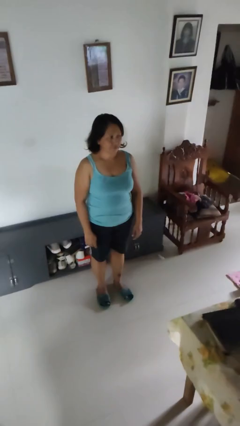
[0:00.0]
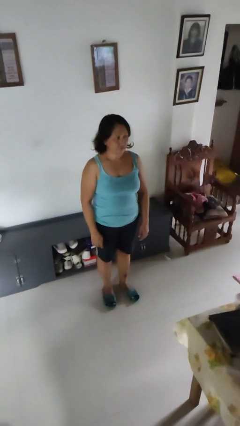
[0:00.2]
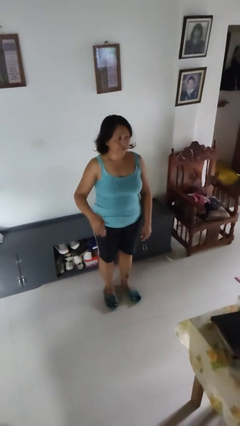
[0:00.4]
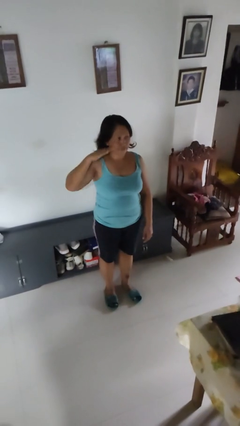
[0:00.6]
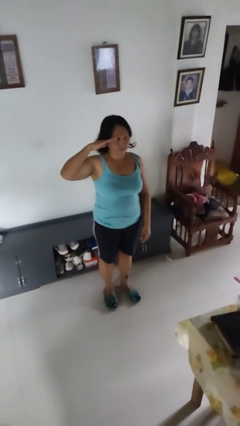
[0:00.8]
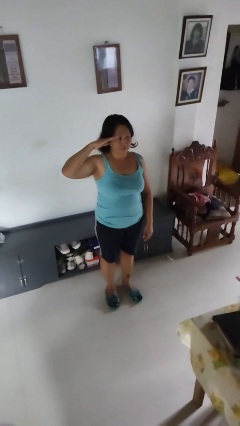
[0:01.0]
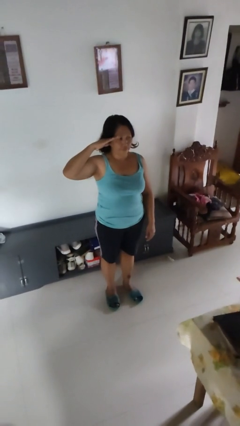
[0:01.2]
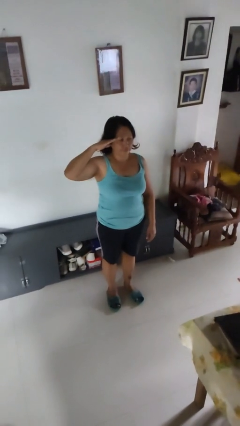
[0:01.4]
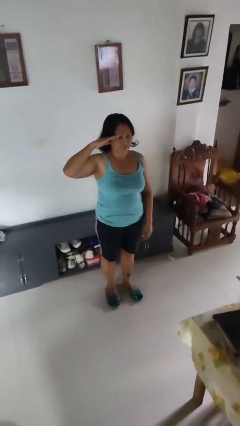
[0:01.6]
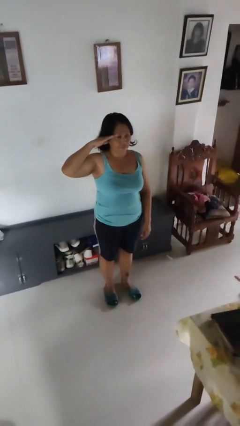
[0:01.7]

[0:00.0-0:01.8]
person salutes

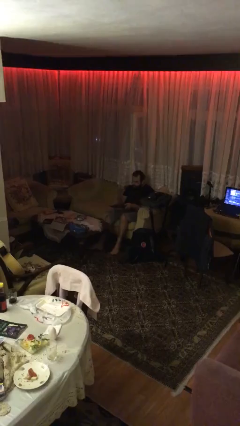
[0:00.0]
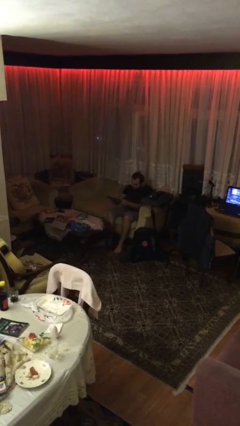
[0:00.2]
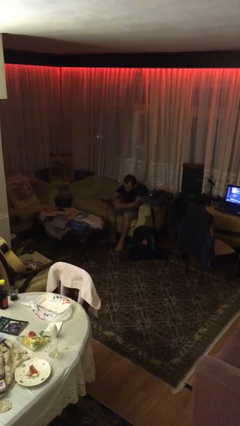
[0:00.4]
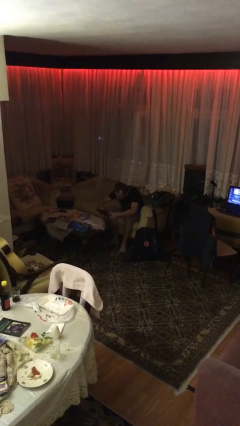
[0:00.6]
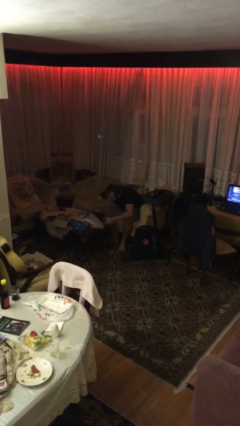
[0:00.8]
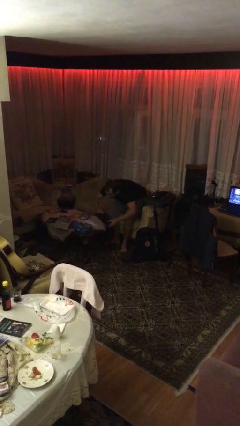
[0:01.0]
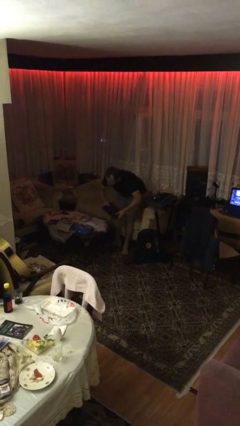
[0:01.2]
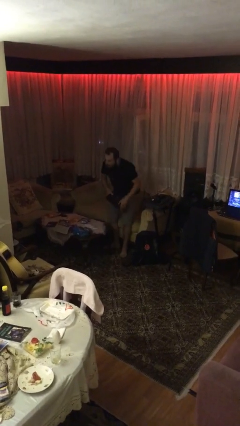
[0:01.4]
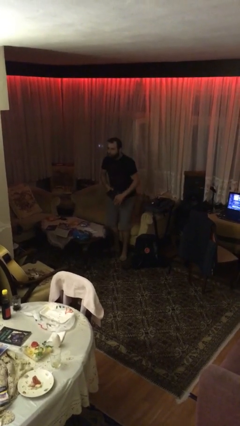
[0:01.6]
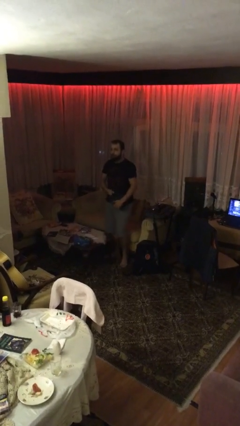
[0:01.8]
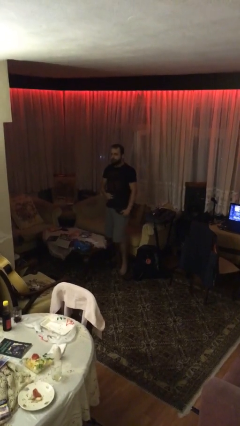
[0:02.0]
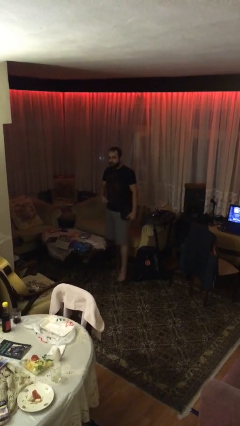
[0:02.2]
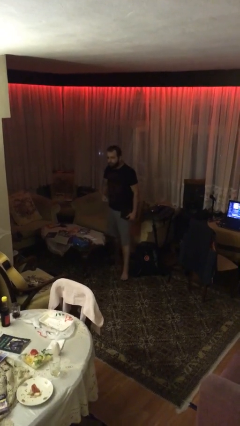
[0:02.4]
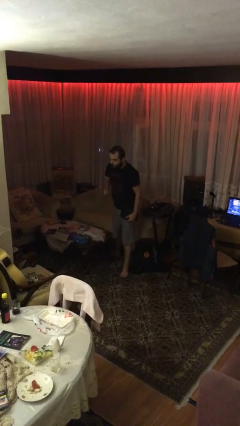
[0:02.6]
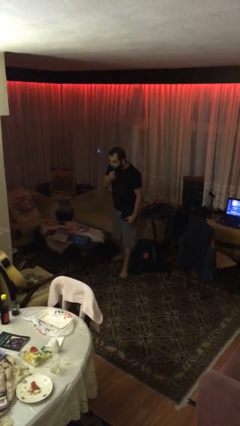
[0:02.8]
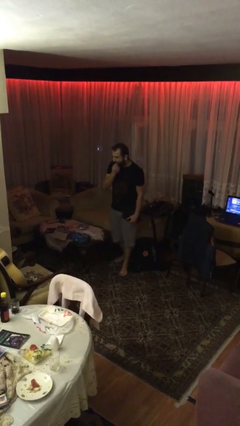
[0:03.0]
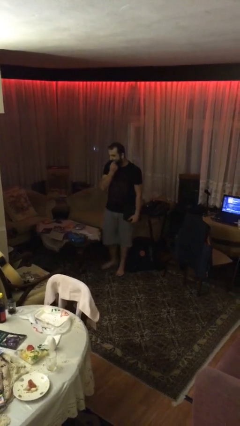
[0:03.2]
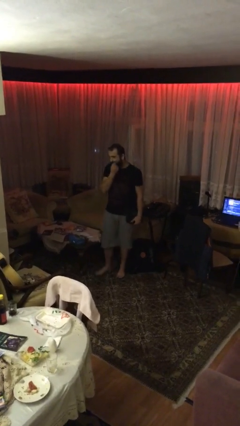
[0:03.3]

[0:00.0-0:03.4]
person stands up

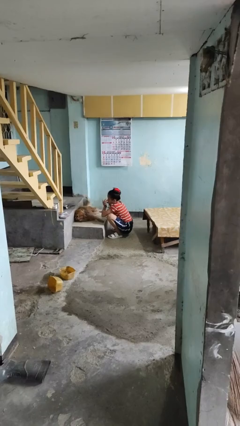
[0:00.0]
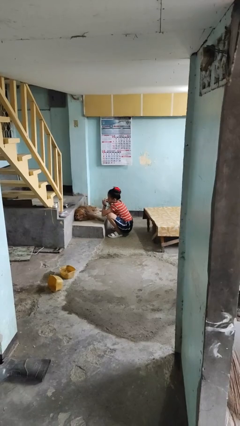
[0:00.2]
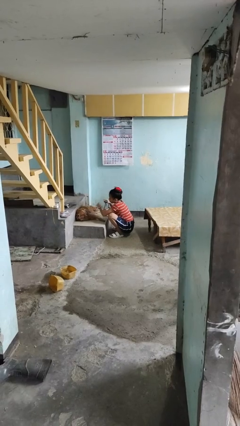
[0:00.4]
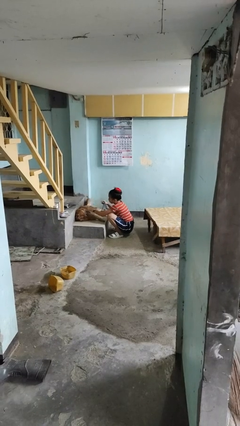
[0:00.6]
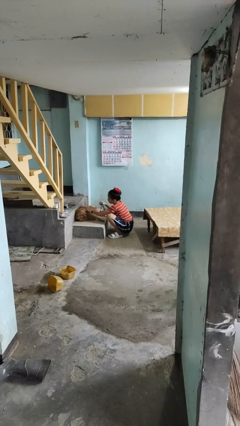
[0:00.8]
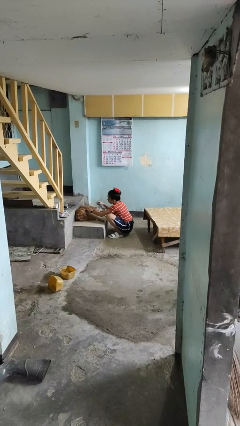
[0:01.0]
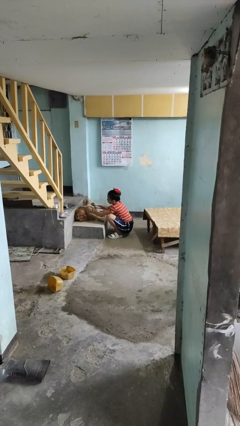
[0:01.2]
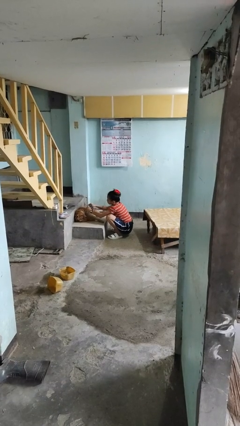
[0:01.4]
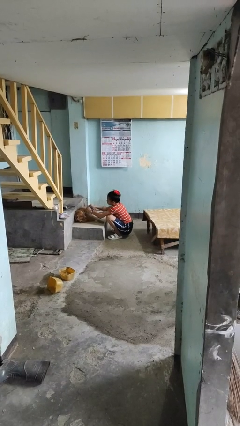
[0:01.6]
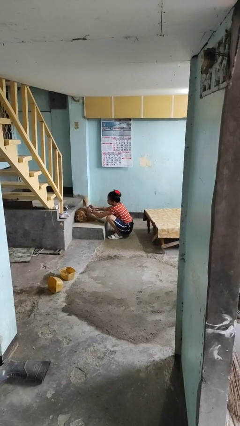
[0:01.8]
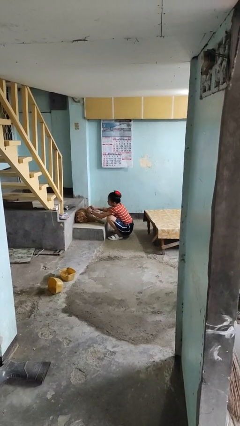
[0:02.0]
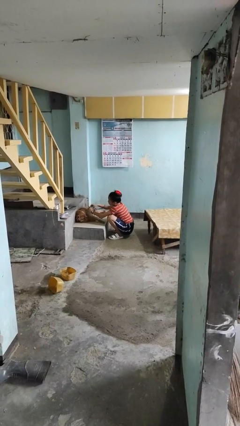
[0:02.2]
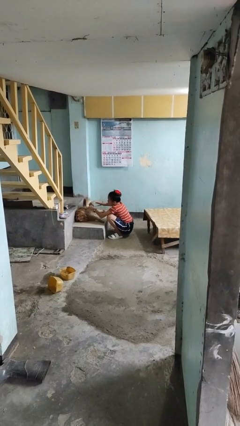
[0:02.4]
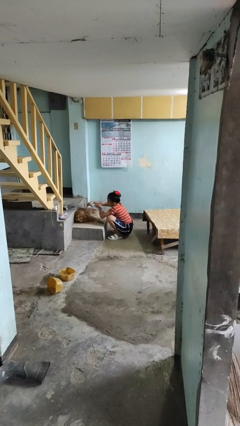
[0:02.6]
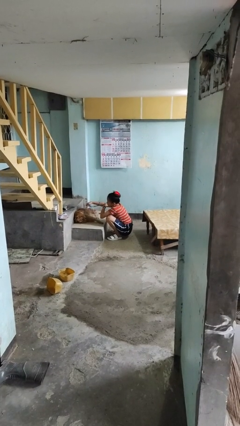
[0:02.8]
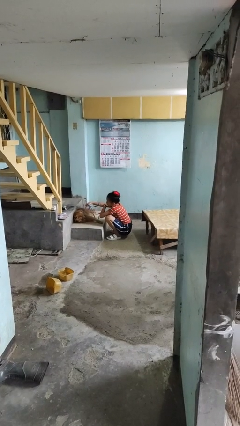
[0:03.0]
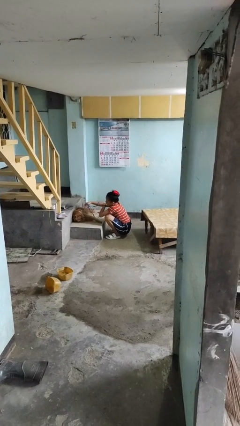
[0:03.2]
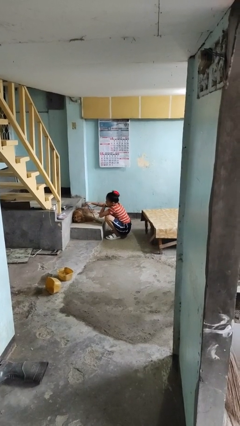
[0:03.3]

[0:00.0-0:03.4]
person attaches leash to dog

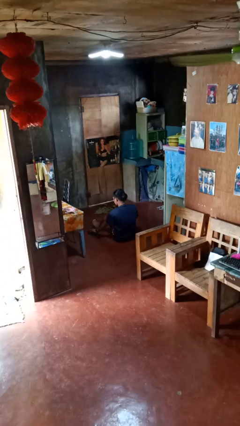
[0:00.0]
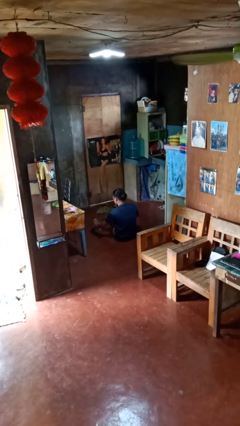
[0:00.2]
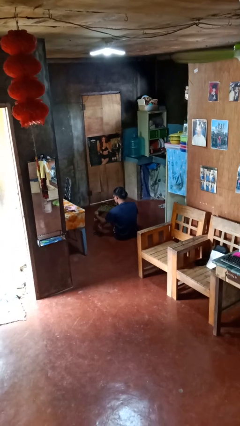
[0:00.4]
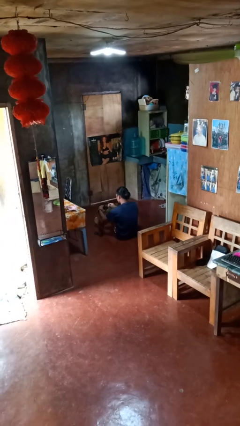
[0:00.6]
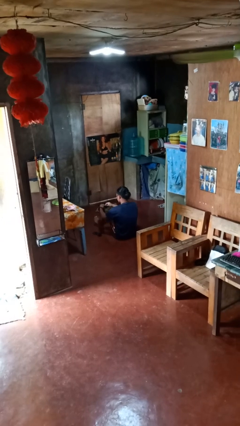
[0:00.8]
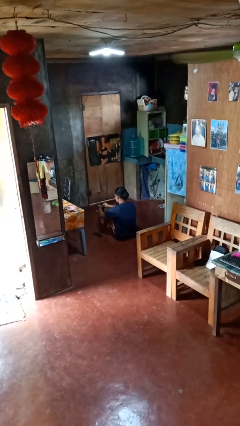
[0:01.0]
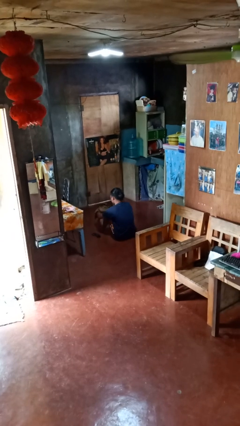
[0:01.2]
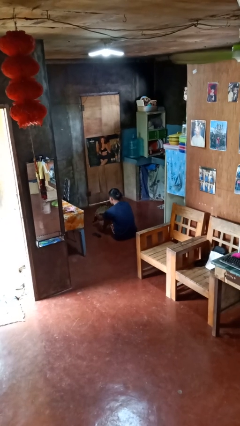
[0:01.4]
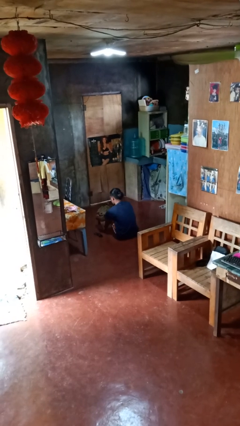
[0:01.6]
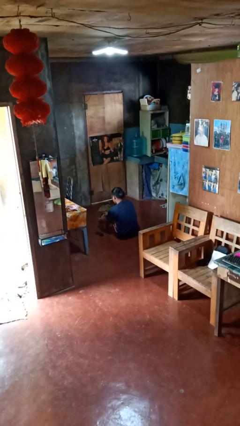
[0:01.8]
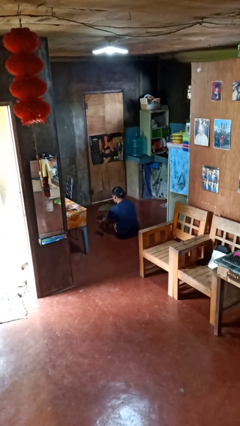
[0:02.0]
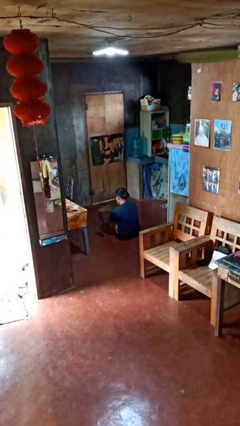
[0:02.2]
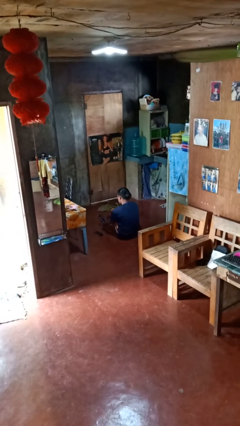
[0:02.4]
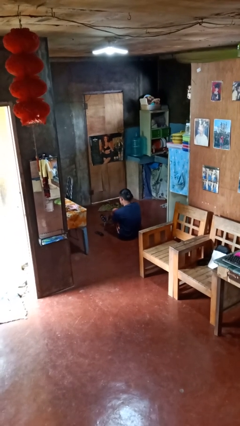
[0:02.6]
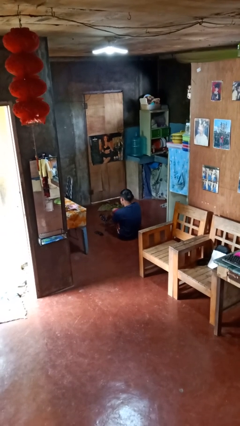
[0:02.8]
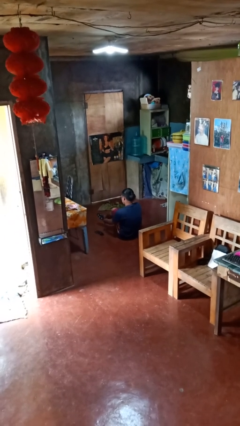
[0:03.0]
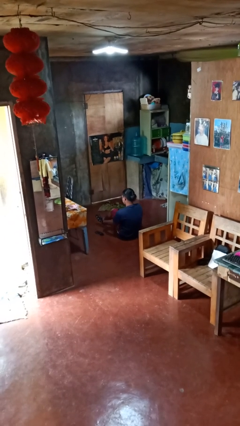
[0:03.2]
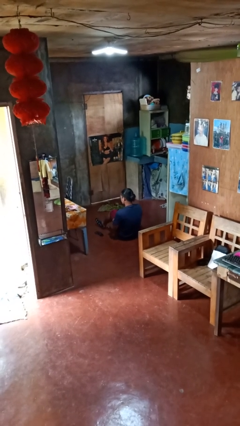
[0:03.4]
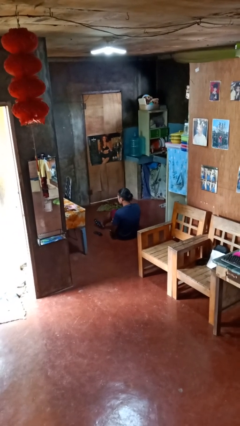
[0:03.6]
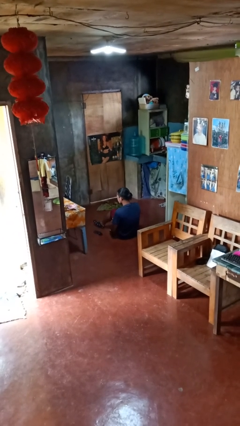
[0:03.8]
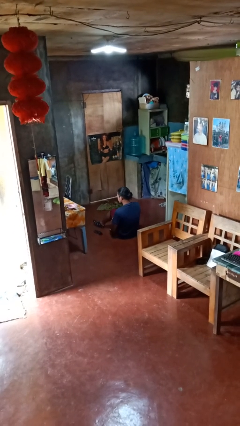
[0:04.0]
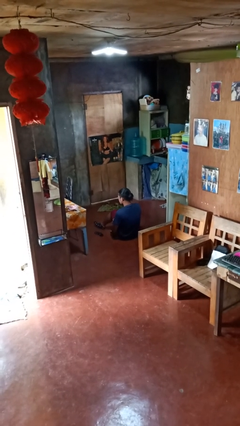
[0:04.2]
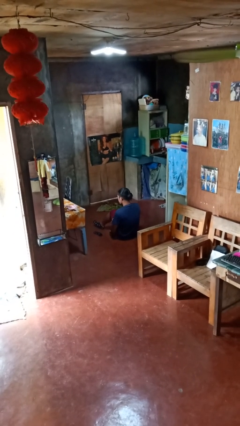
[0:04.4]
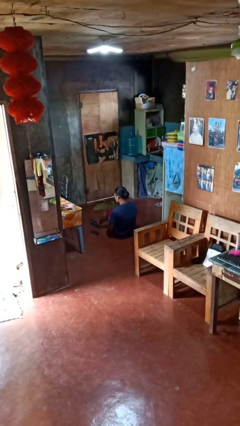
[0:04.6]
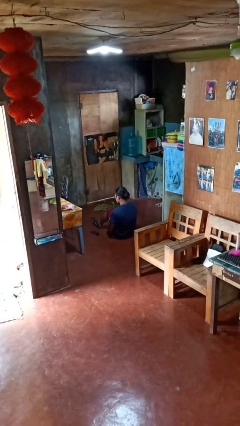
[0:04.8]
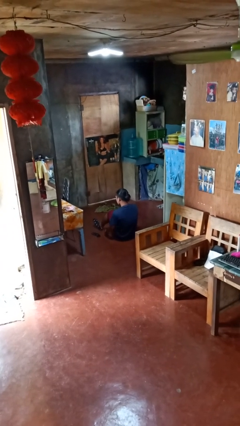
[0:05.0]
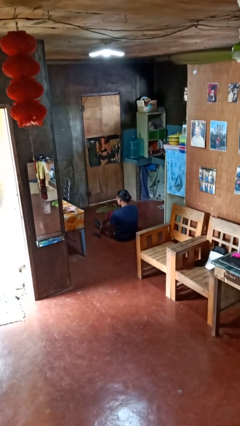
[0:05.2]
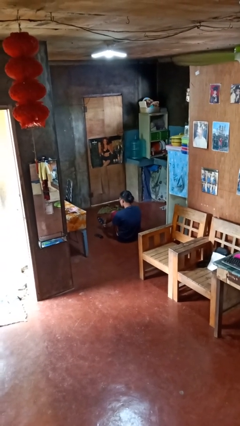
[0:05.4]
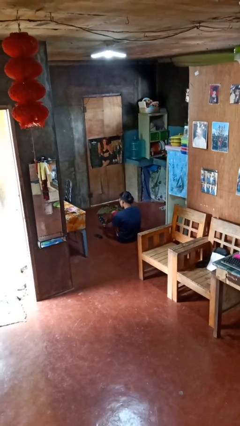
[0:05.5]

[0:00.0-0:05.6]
person puts on socks

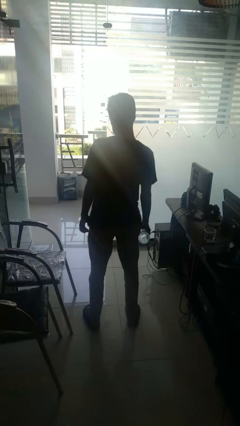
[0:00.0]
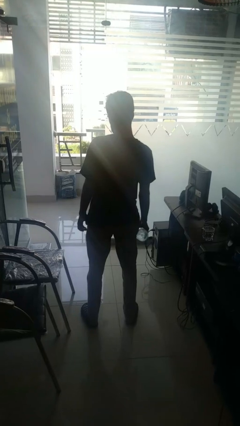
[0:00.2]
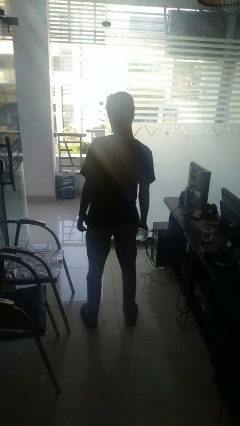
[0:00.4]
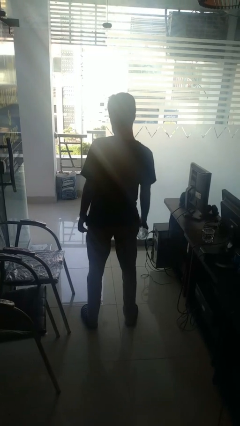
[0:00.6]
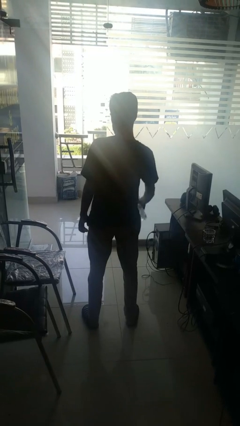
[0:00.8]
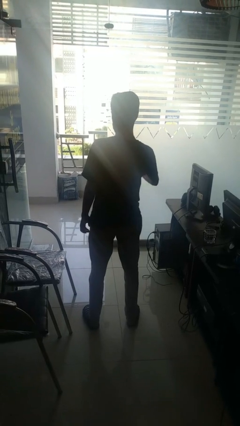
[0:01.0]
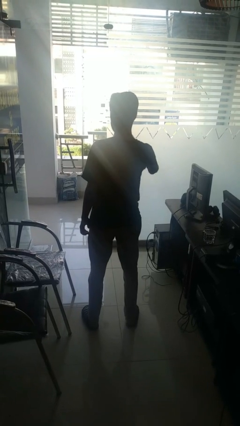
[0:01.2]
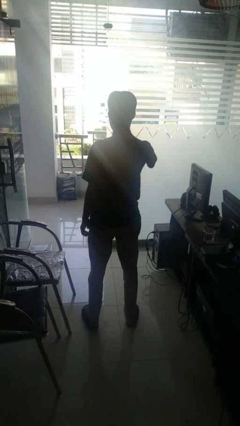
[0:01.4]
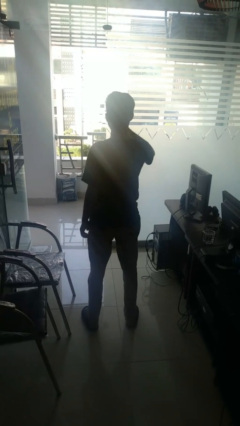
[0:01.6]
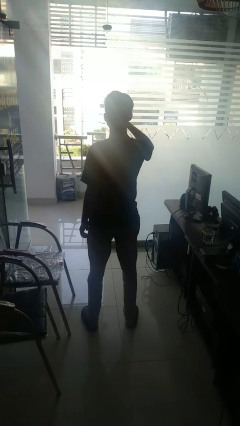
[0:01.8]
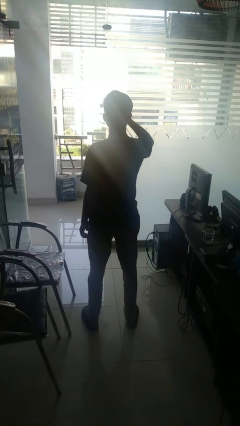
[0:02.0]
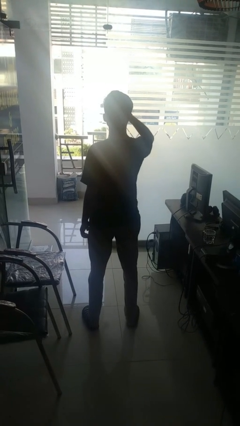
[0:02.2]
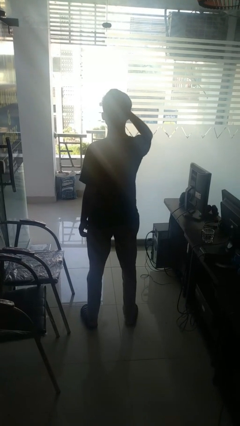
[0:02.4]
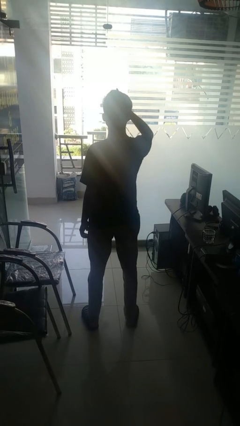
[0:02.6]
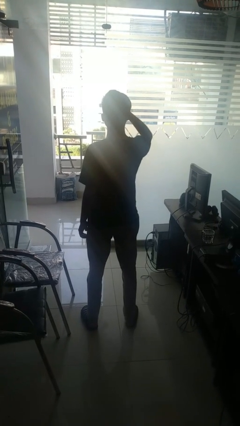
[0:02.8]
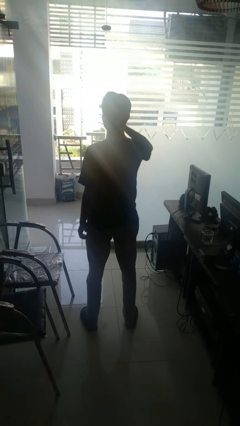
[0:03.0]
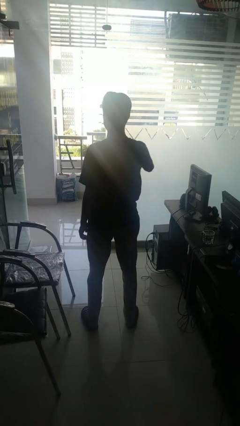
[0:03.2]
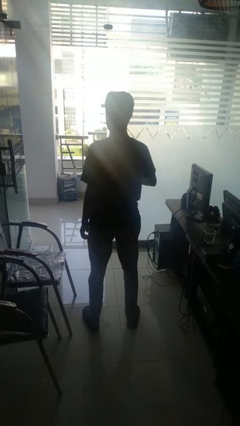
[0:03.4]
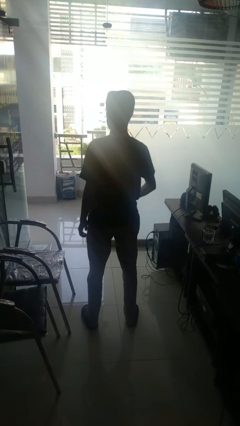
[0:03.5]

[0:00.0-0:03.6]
person drinks from bottle
